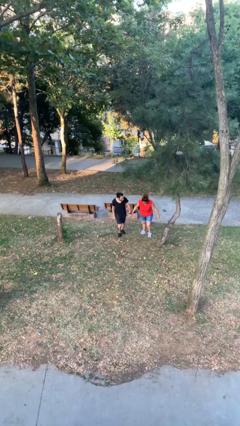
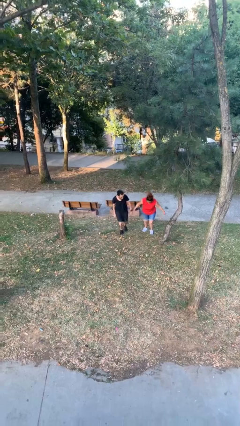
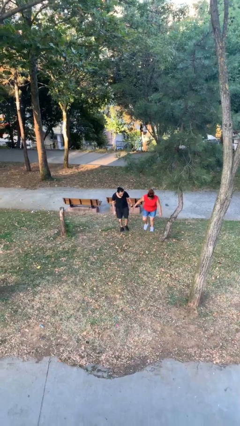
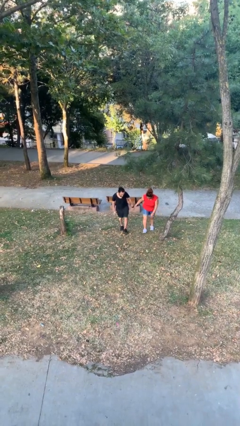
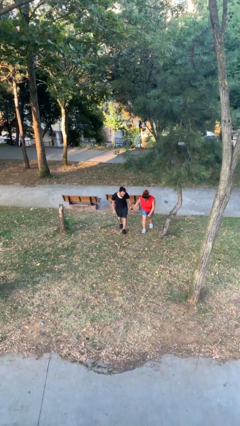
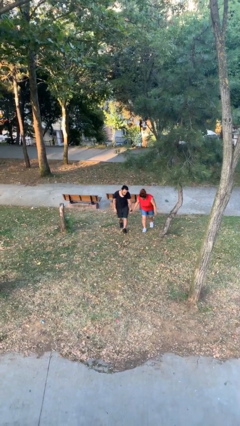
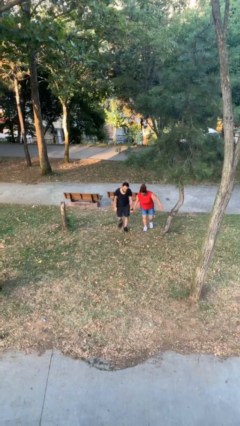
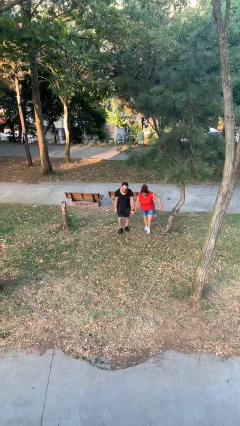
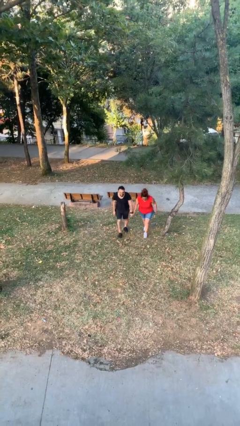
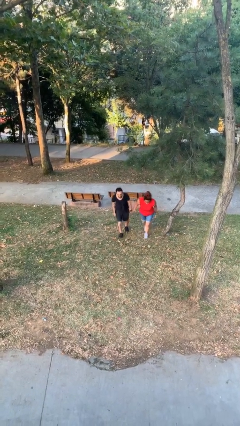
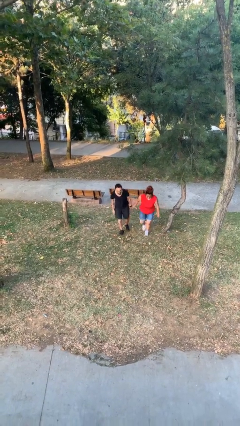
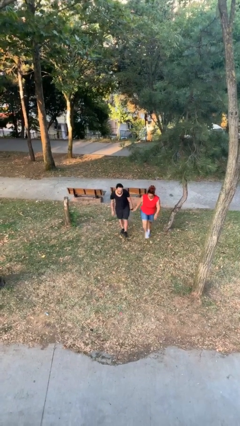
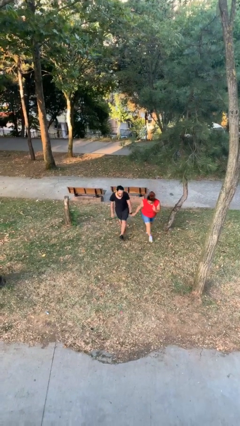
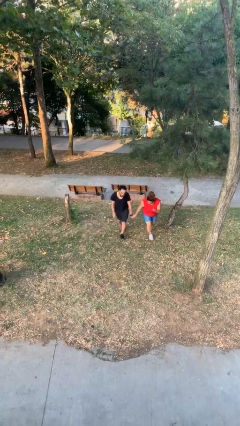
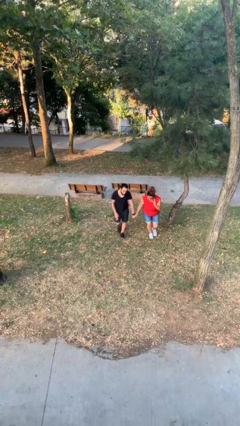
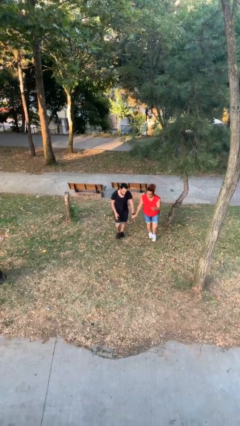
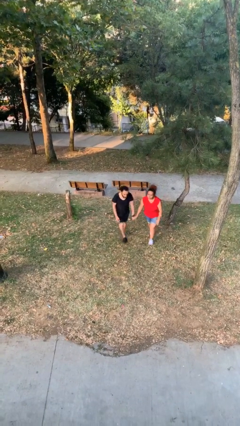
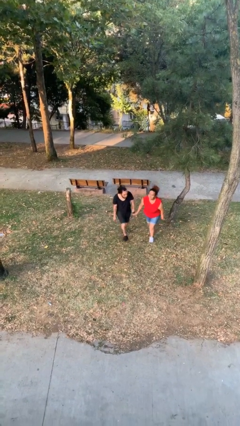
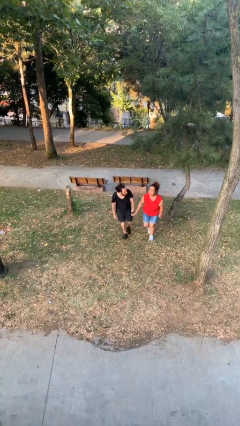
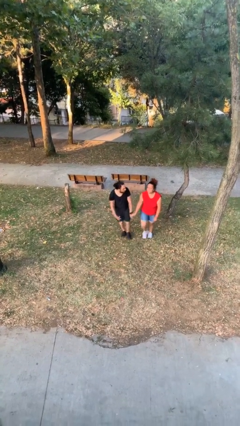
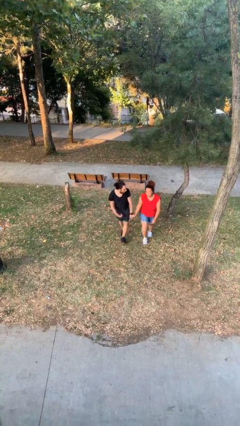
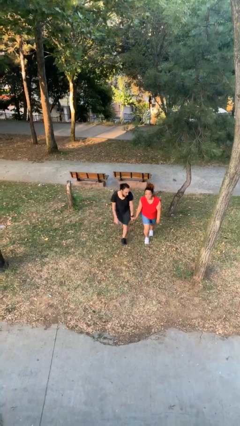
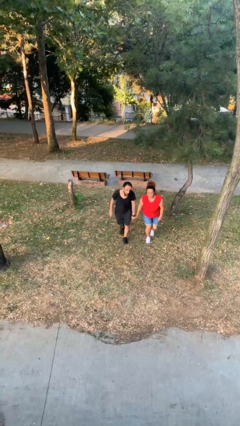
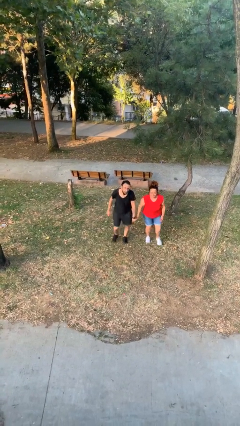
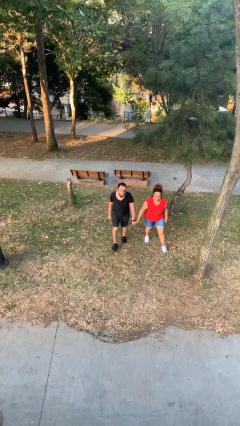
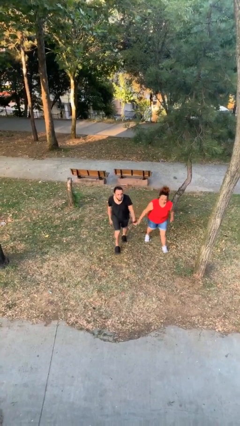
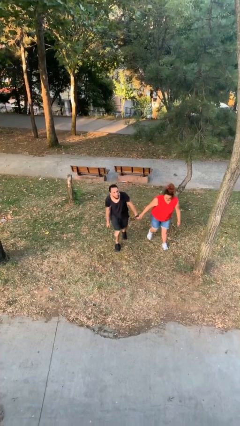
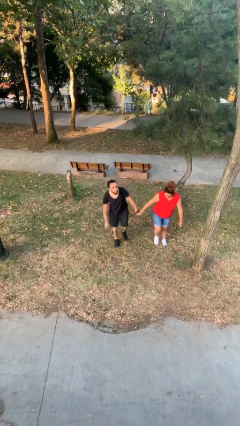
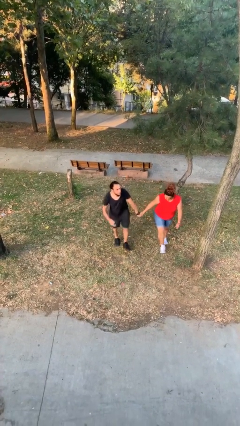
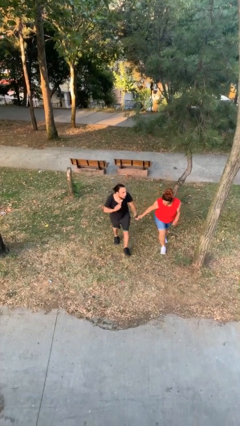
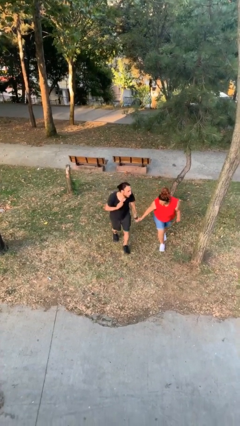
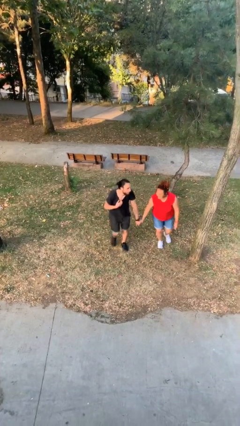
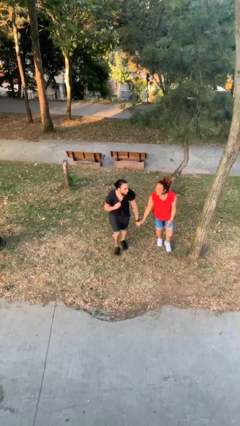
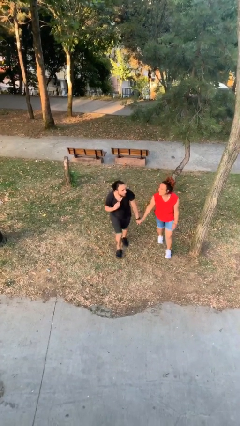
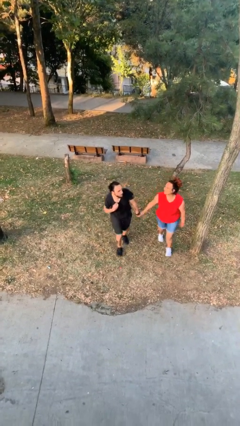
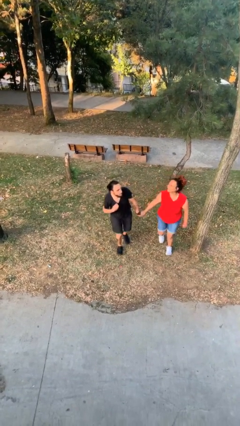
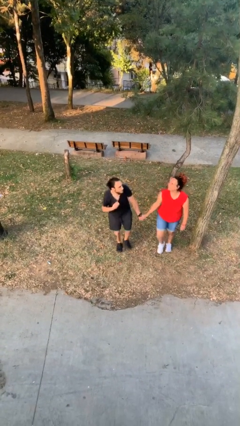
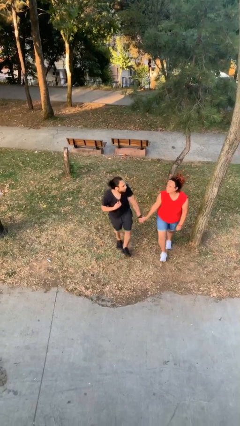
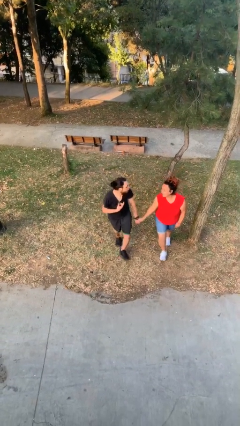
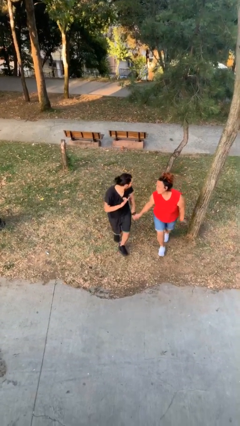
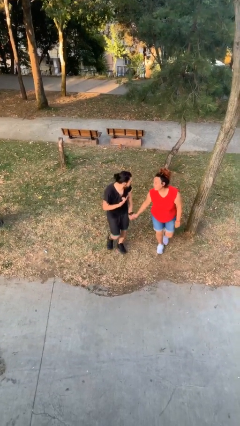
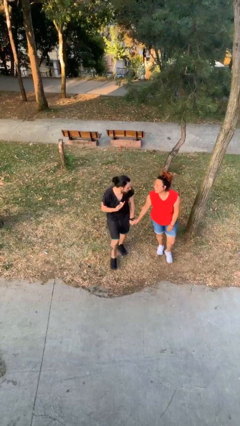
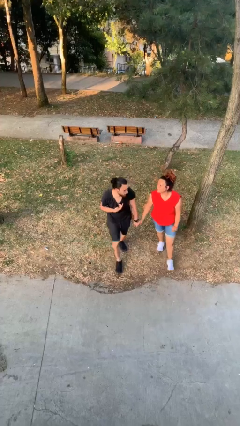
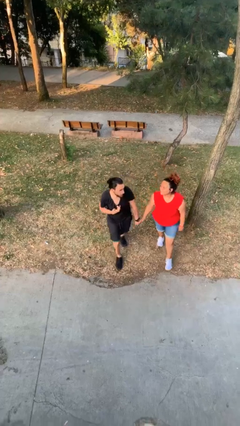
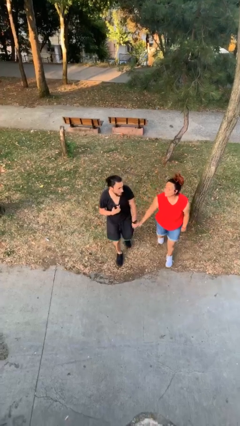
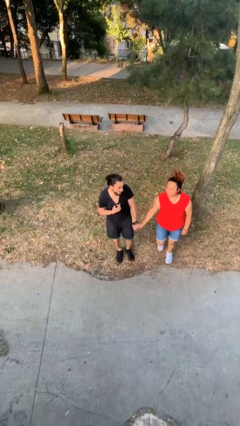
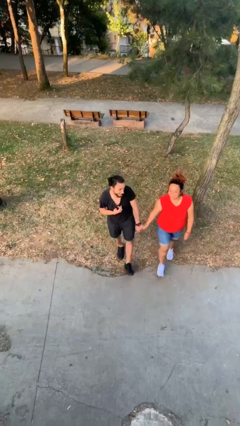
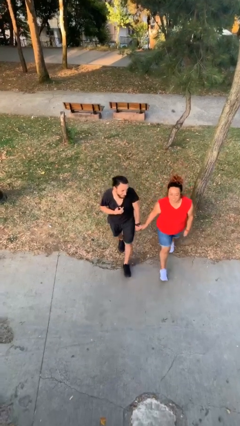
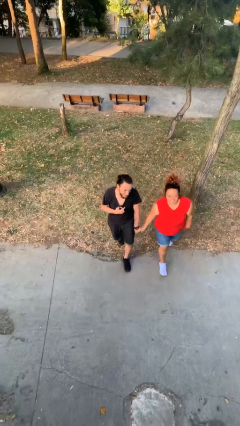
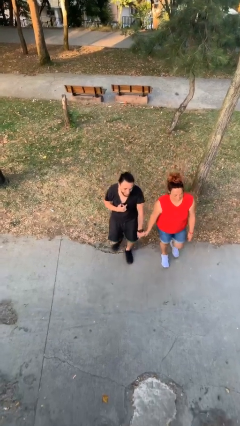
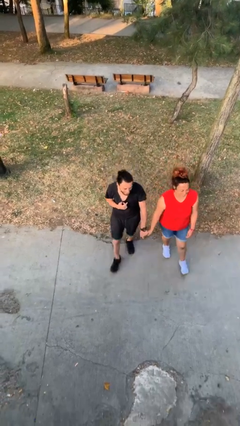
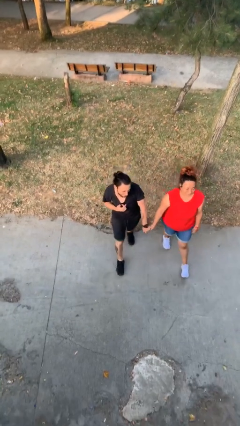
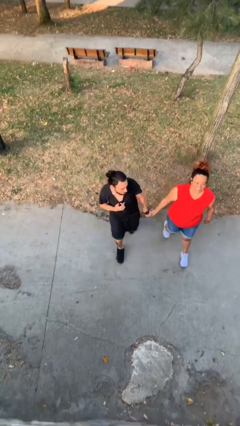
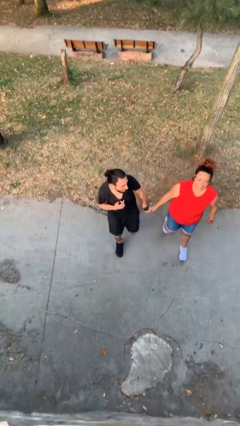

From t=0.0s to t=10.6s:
person holds hand

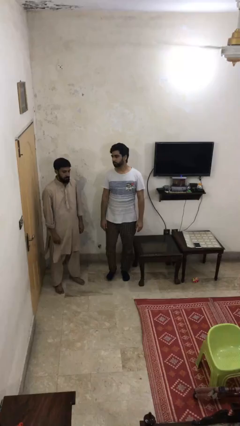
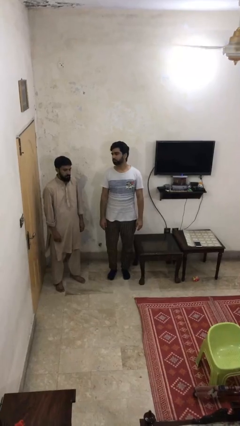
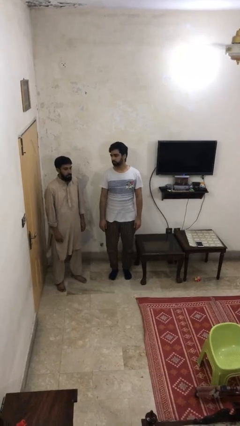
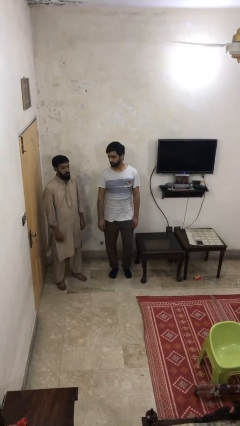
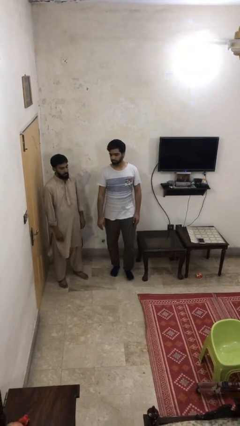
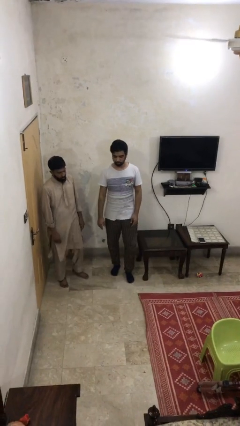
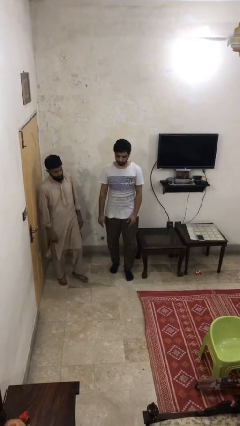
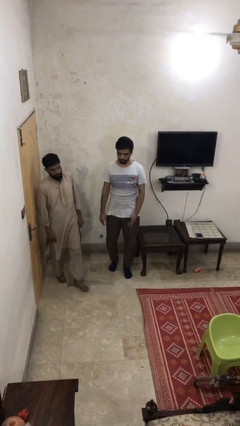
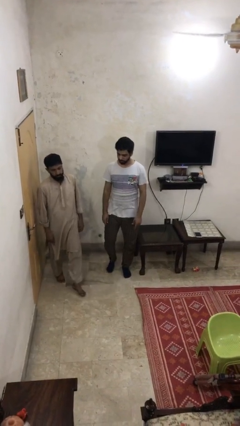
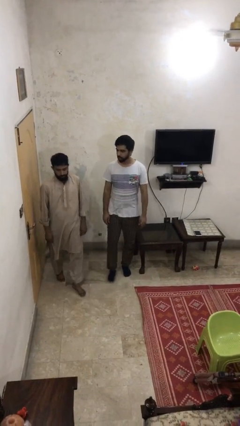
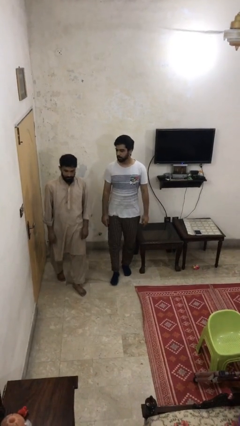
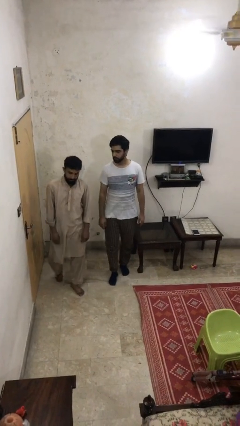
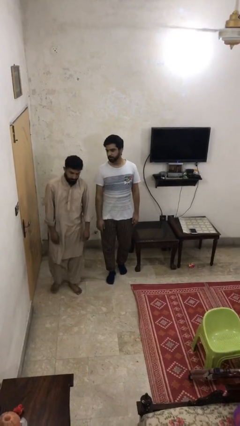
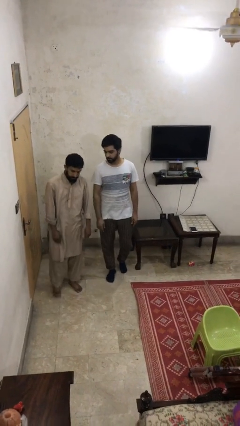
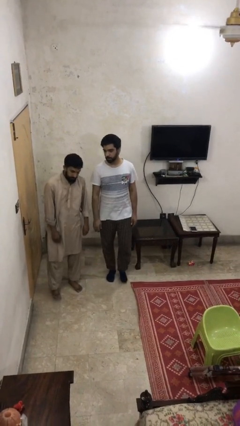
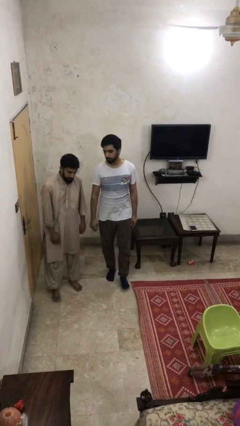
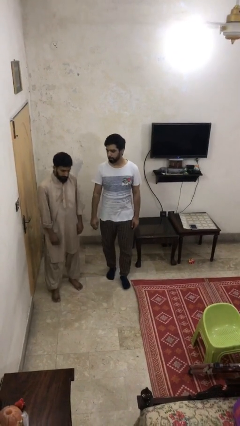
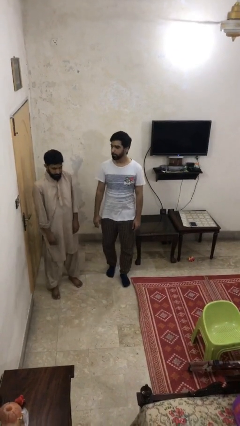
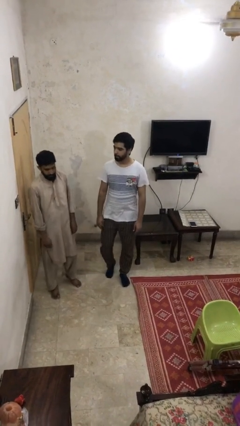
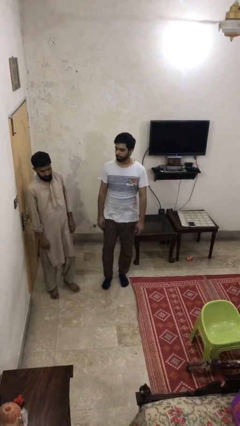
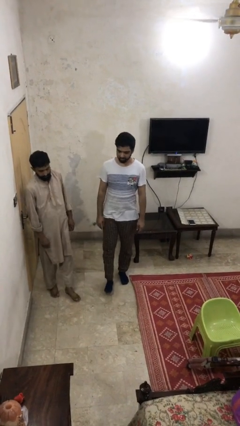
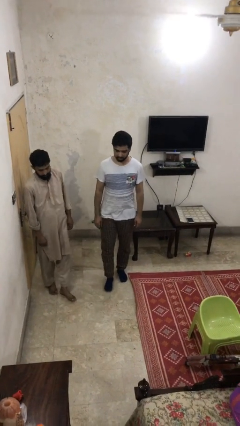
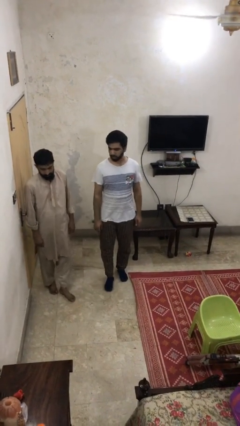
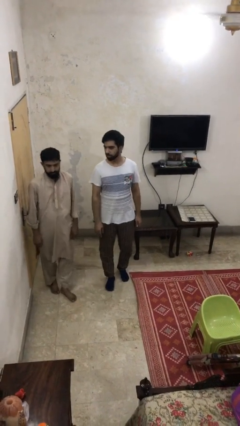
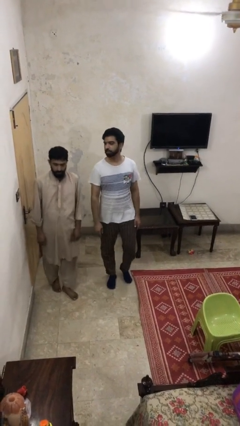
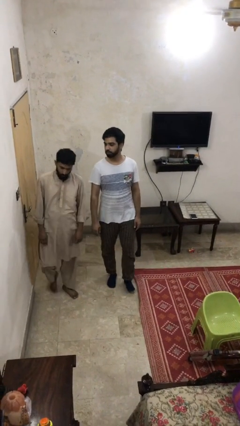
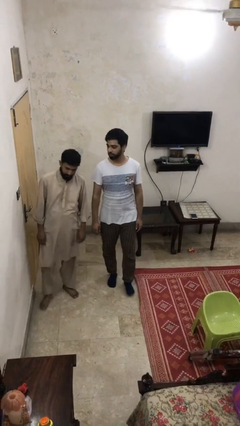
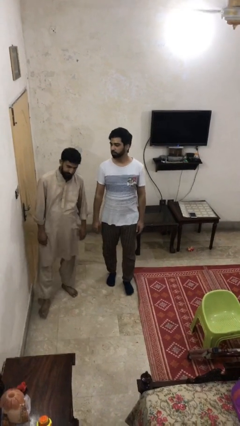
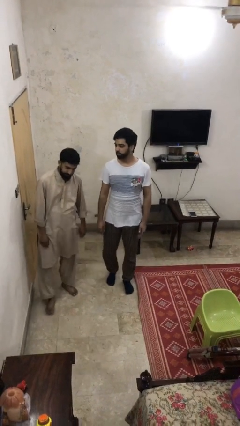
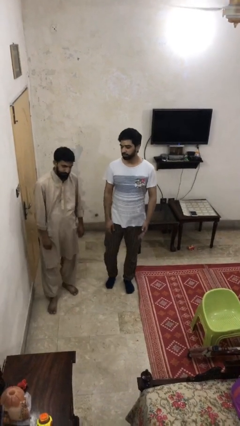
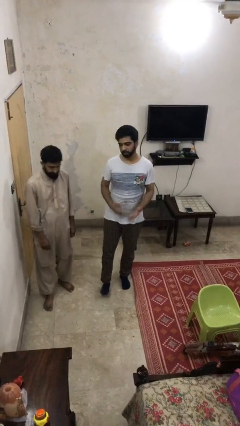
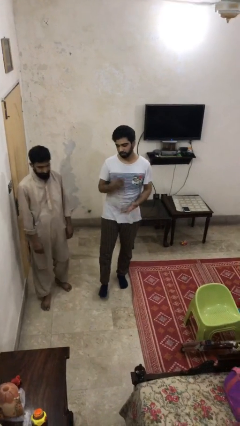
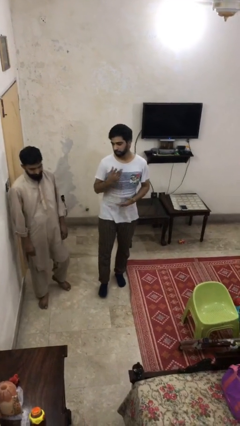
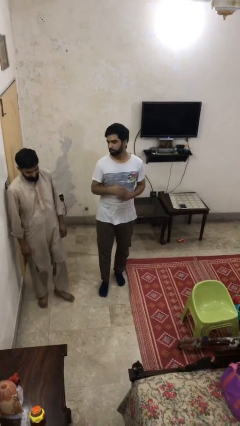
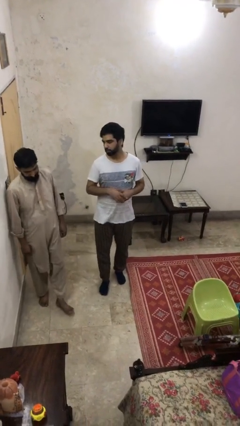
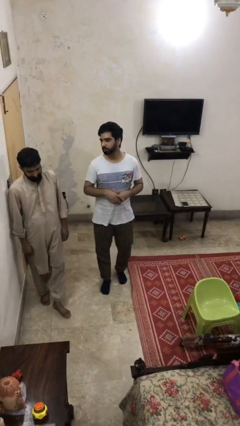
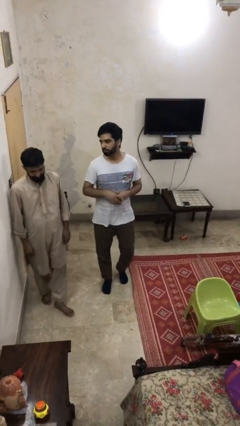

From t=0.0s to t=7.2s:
person talks to person
